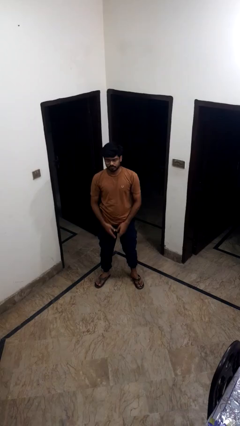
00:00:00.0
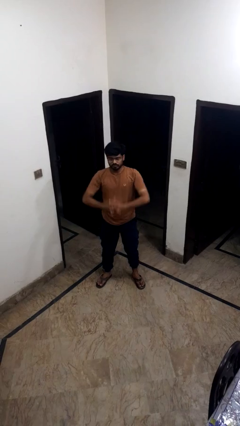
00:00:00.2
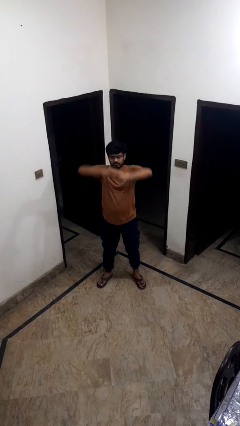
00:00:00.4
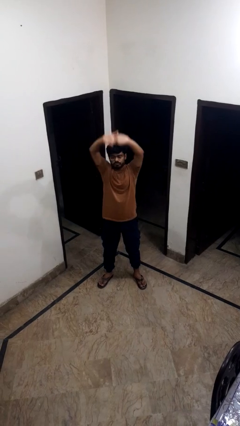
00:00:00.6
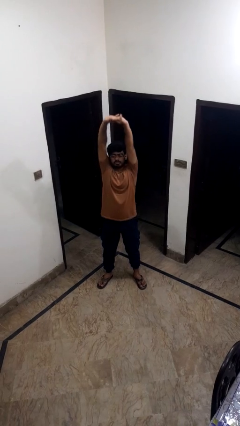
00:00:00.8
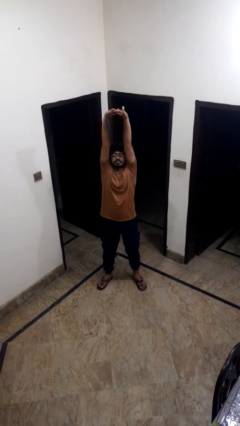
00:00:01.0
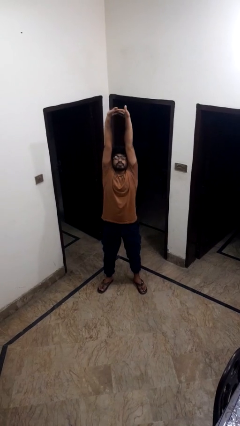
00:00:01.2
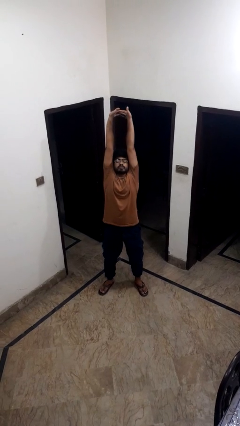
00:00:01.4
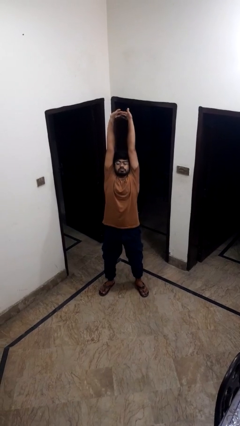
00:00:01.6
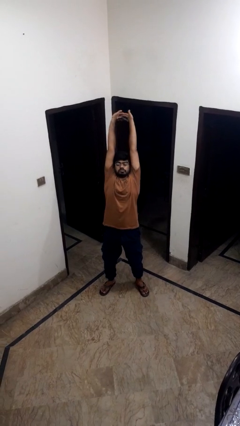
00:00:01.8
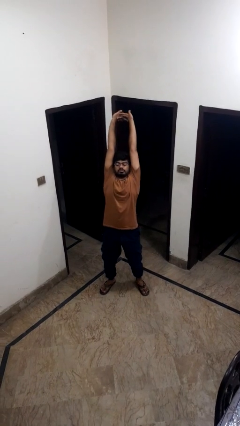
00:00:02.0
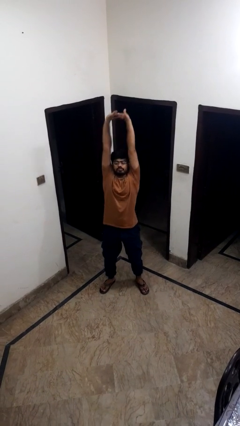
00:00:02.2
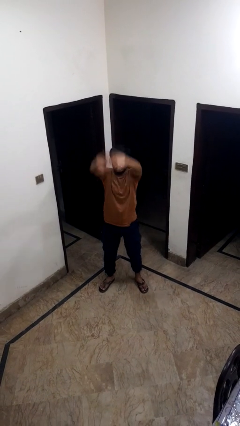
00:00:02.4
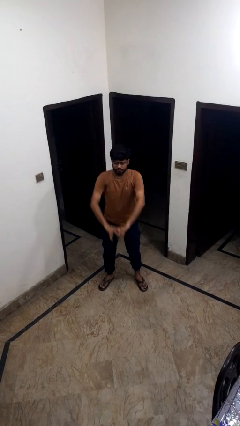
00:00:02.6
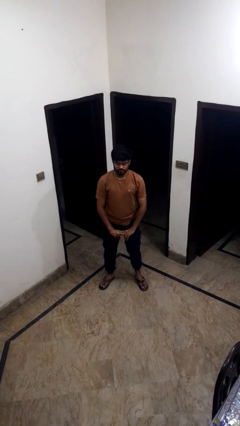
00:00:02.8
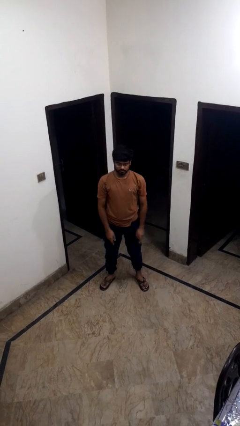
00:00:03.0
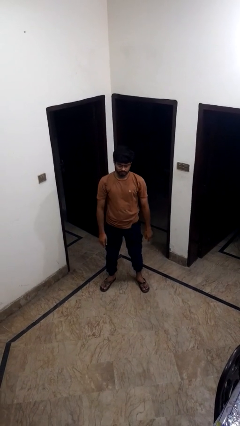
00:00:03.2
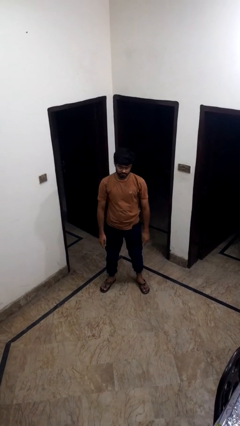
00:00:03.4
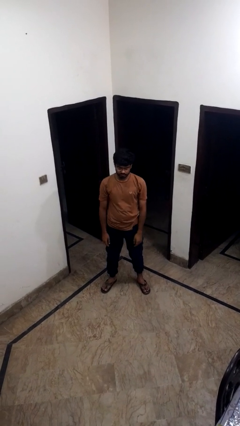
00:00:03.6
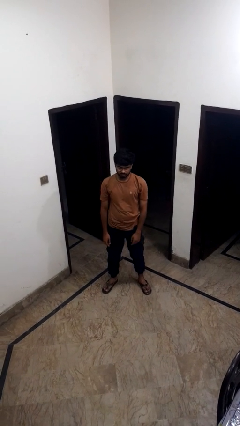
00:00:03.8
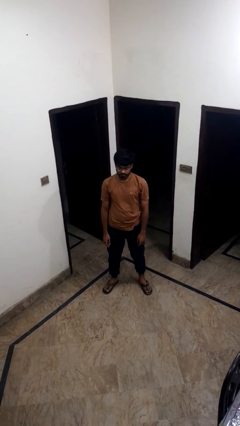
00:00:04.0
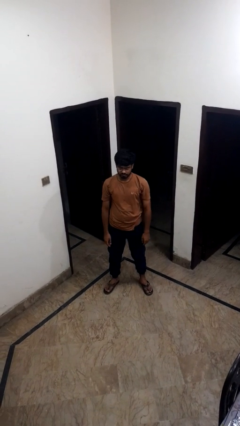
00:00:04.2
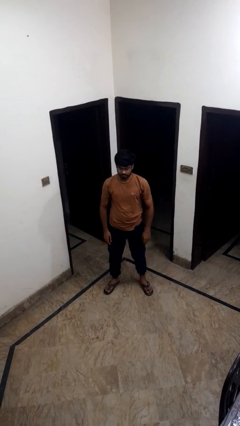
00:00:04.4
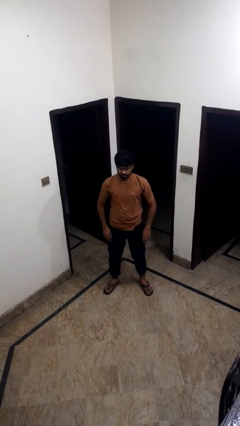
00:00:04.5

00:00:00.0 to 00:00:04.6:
person ties jacket around waist

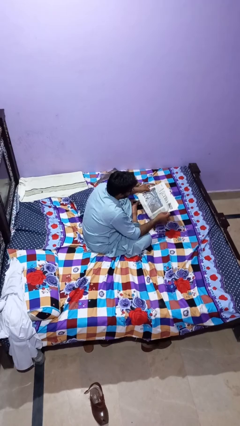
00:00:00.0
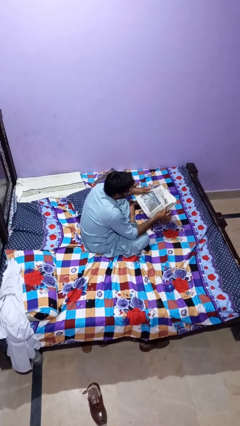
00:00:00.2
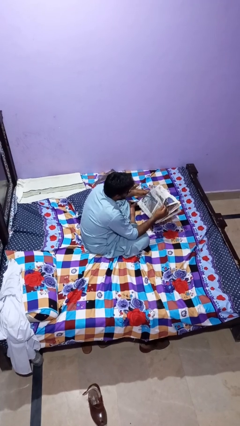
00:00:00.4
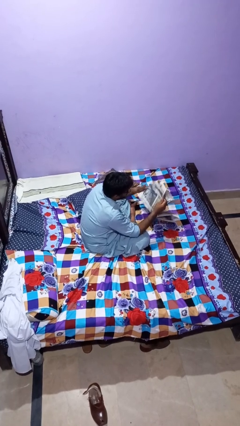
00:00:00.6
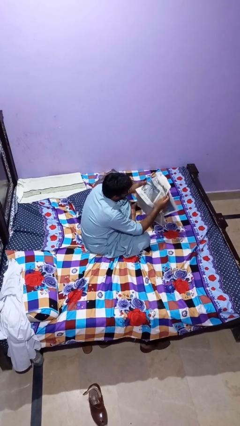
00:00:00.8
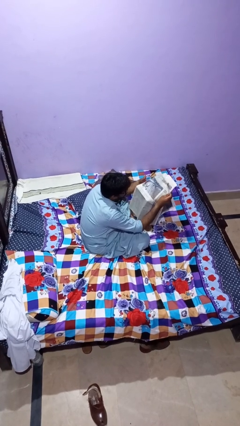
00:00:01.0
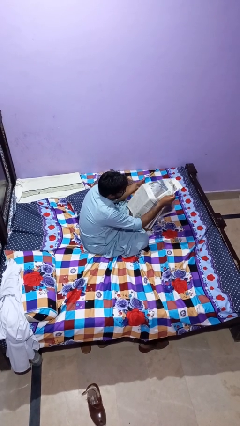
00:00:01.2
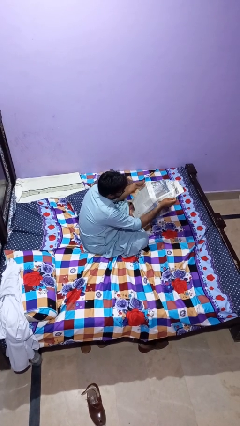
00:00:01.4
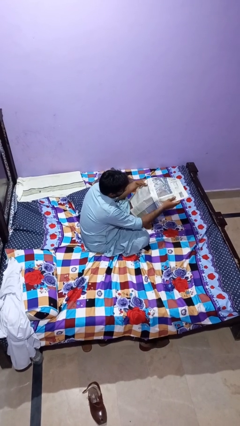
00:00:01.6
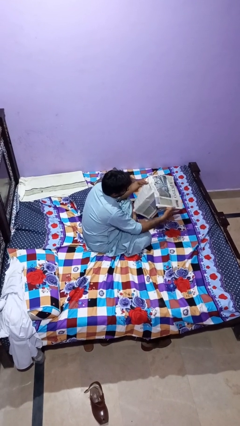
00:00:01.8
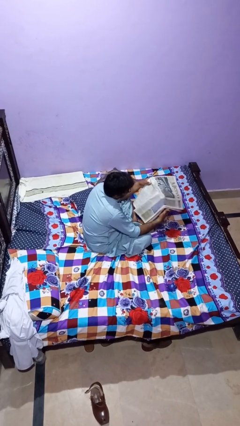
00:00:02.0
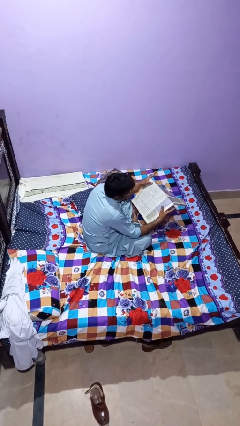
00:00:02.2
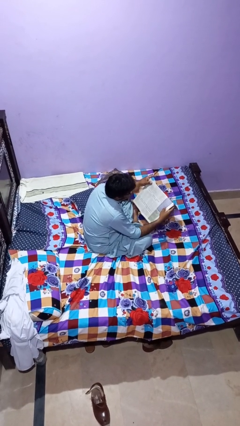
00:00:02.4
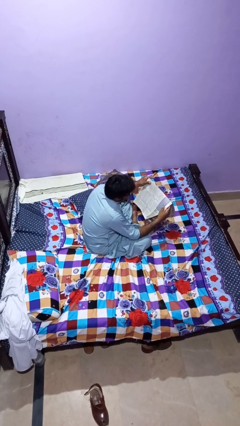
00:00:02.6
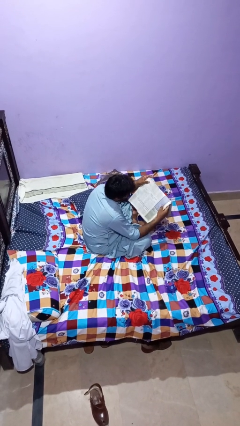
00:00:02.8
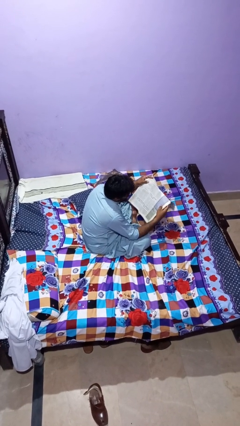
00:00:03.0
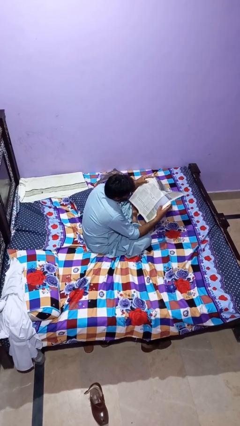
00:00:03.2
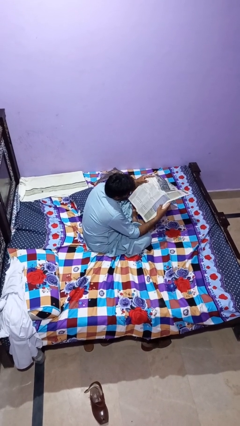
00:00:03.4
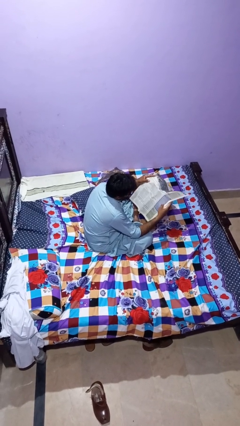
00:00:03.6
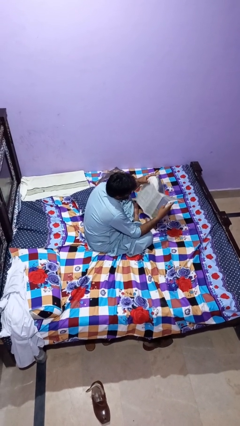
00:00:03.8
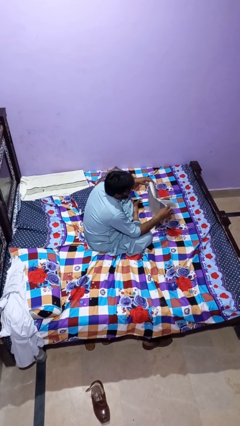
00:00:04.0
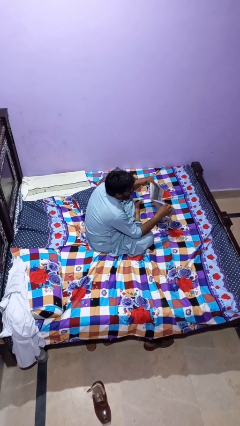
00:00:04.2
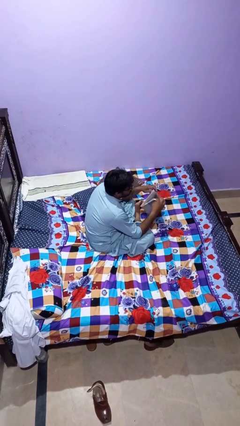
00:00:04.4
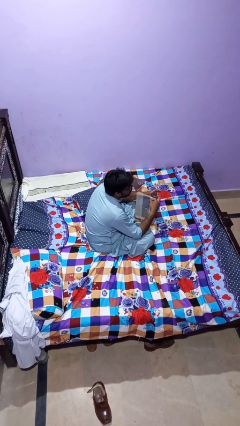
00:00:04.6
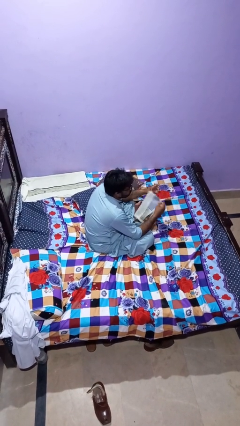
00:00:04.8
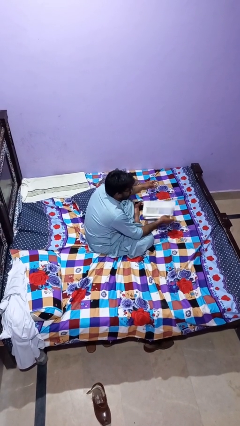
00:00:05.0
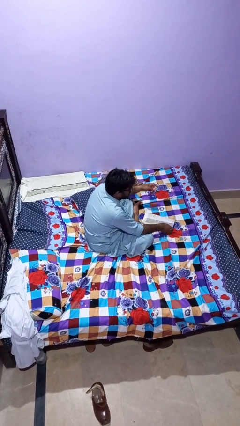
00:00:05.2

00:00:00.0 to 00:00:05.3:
person reads newspaper

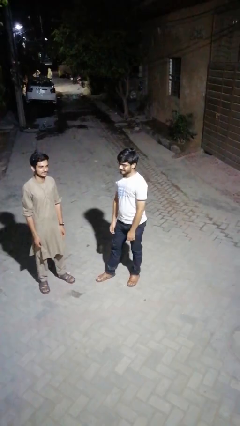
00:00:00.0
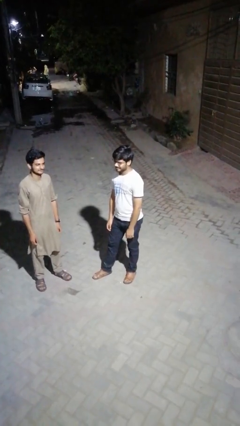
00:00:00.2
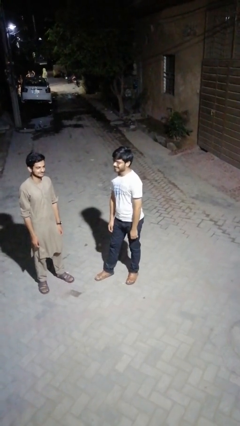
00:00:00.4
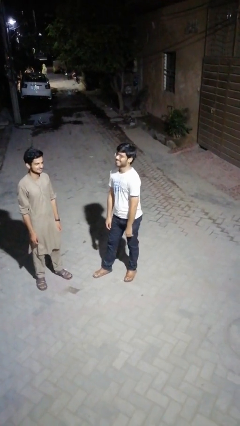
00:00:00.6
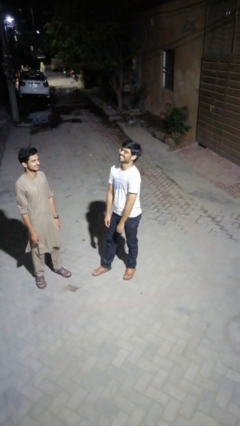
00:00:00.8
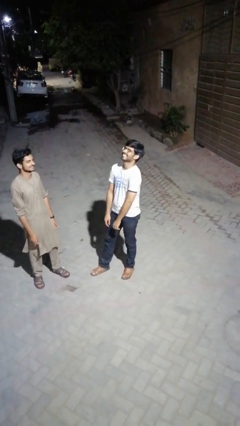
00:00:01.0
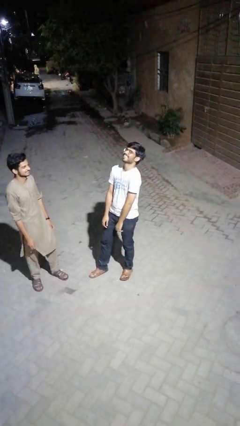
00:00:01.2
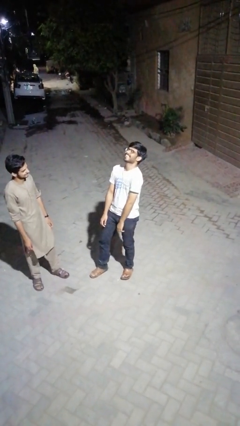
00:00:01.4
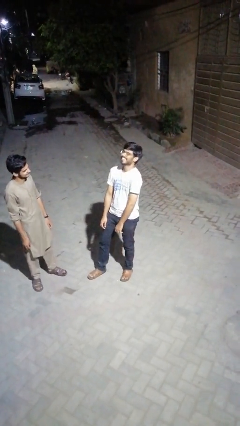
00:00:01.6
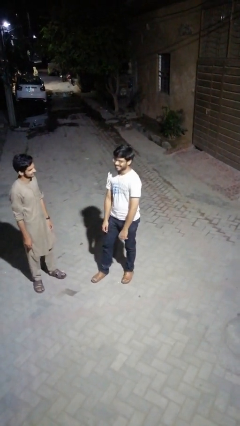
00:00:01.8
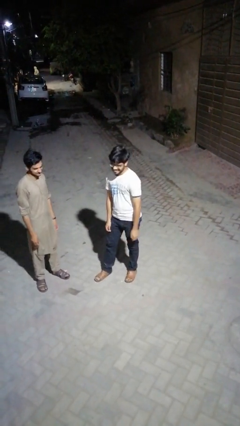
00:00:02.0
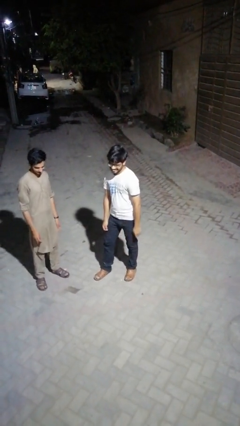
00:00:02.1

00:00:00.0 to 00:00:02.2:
person laughs with person

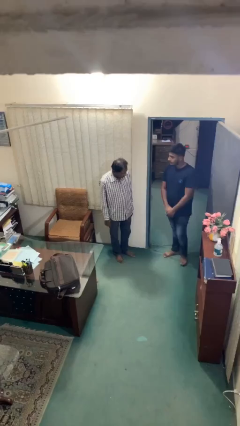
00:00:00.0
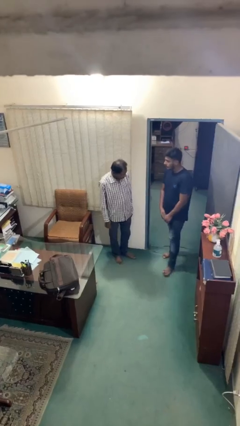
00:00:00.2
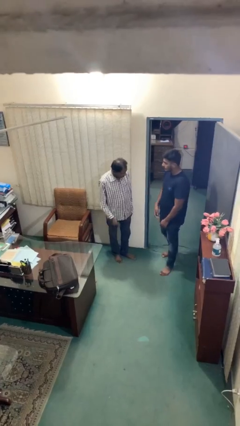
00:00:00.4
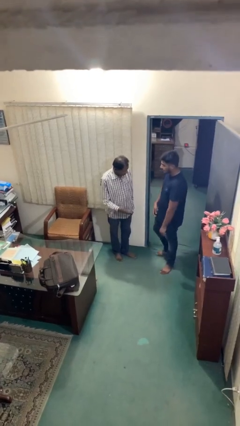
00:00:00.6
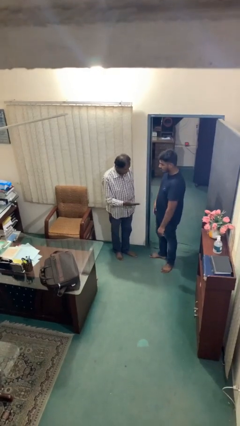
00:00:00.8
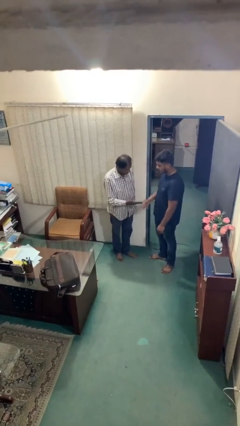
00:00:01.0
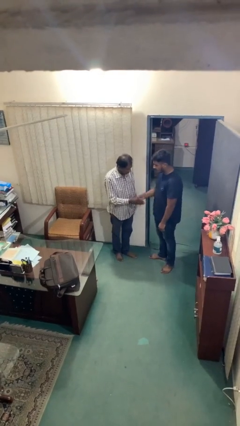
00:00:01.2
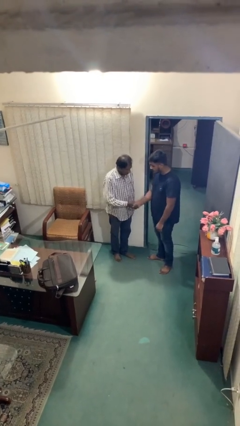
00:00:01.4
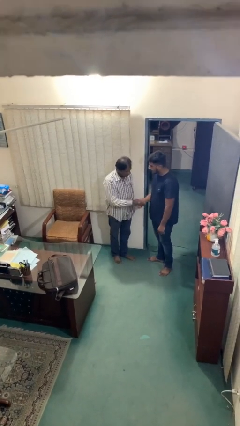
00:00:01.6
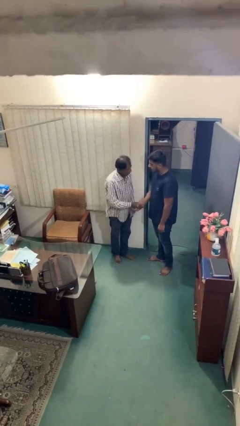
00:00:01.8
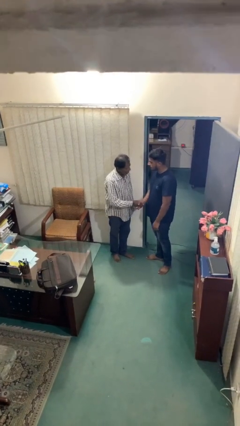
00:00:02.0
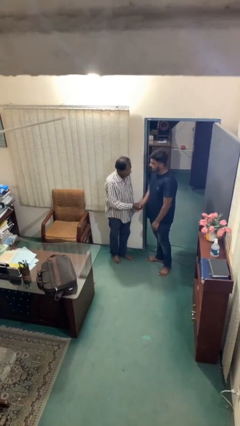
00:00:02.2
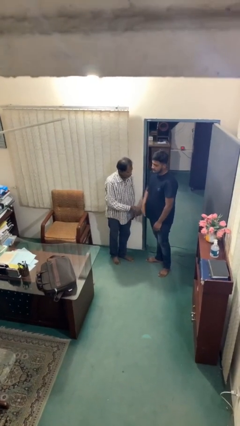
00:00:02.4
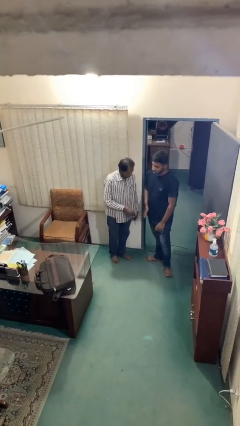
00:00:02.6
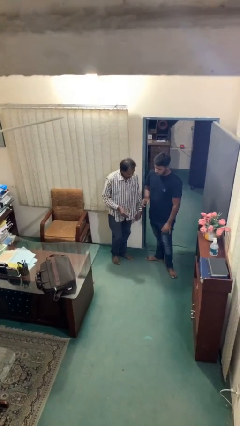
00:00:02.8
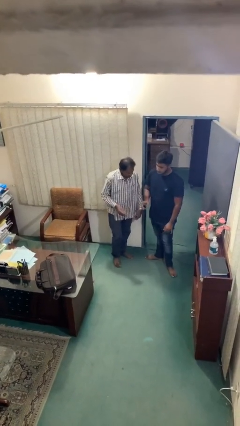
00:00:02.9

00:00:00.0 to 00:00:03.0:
person shakes hand

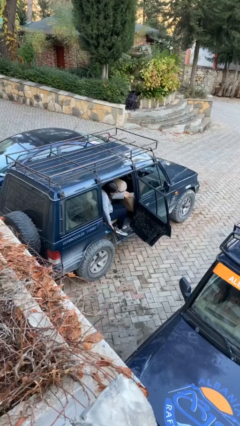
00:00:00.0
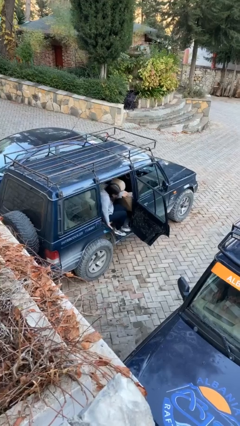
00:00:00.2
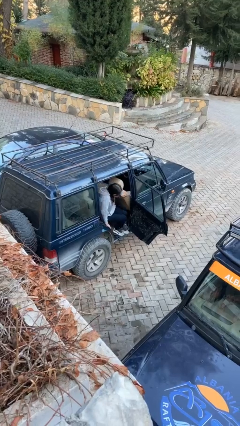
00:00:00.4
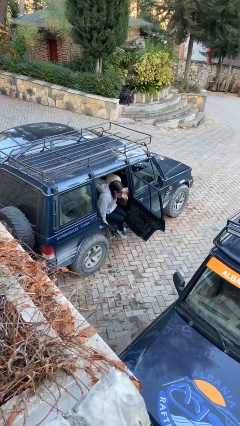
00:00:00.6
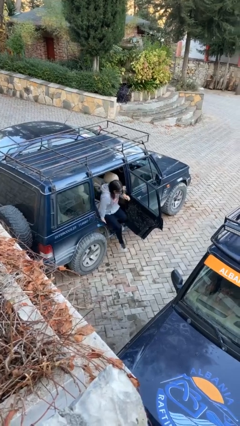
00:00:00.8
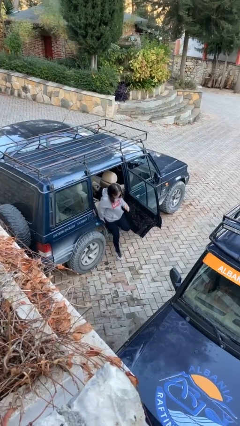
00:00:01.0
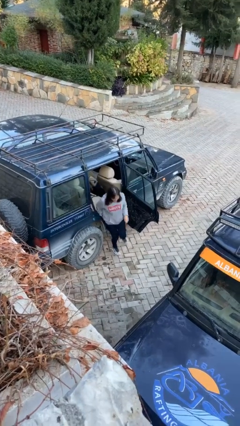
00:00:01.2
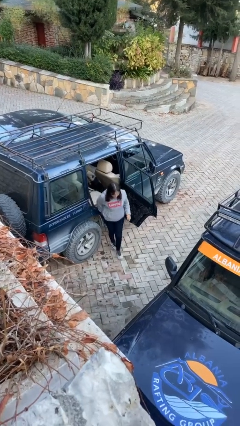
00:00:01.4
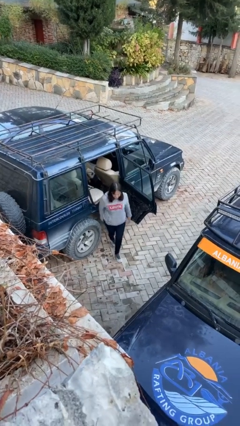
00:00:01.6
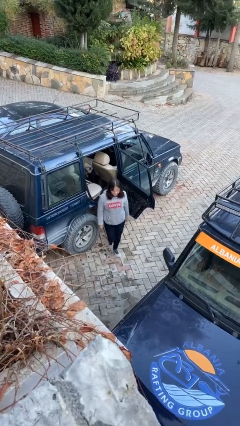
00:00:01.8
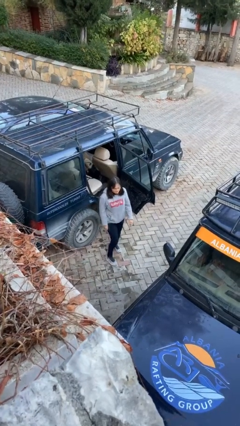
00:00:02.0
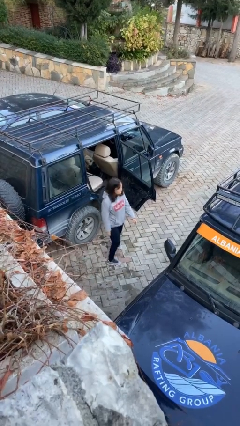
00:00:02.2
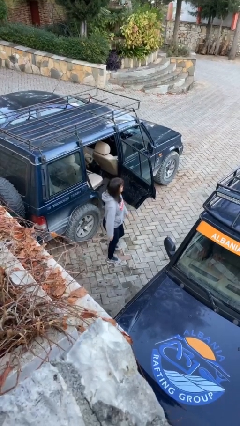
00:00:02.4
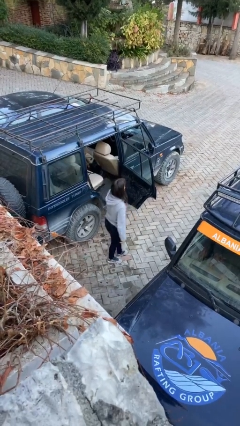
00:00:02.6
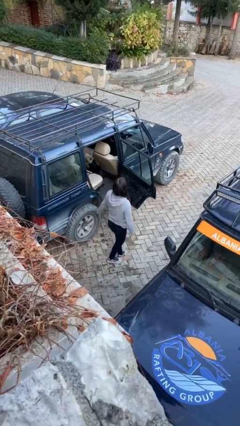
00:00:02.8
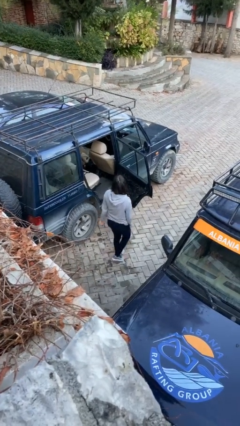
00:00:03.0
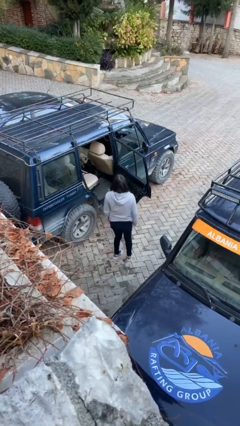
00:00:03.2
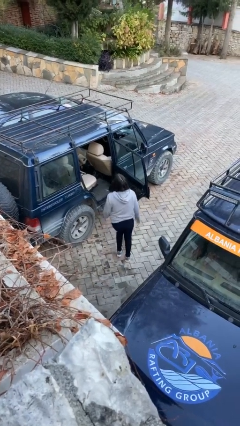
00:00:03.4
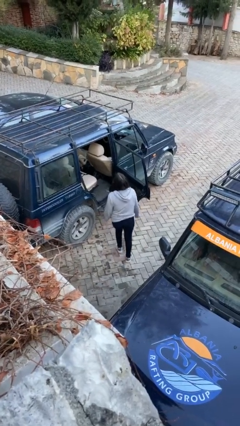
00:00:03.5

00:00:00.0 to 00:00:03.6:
person exits car
